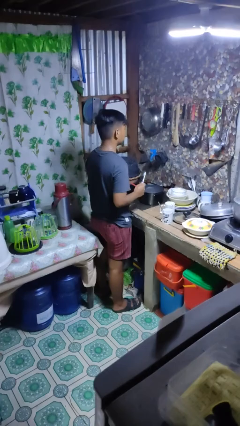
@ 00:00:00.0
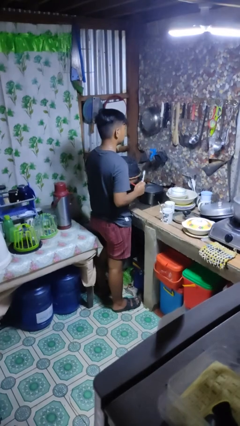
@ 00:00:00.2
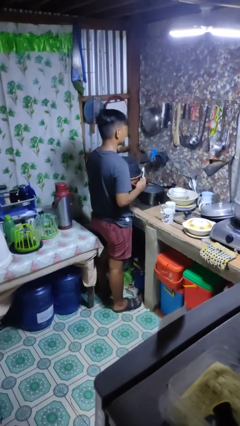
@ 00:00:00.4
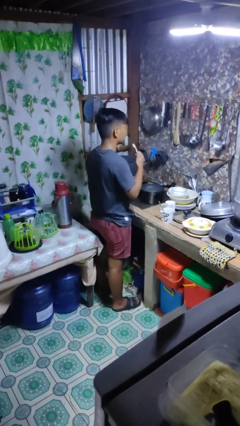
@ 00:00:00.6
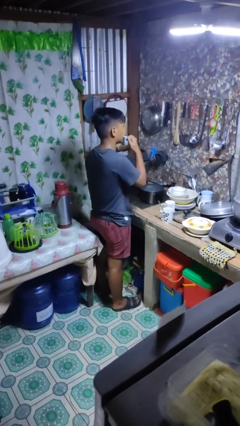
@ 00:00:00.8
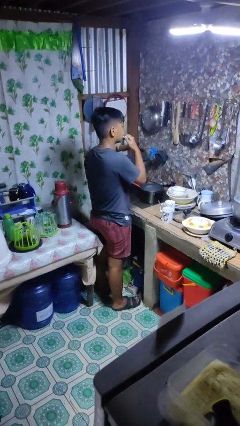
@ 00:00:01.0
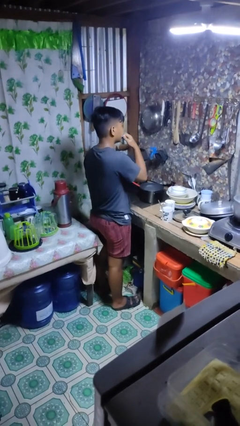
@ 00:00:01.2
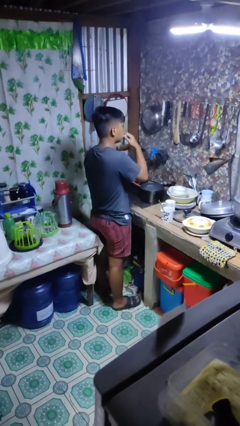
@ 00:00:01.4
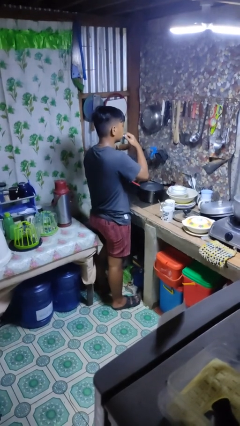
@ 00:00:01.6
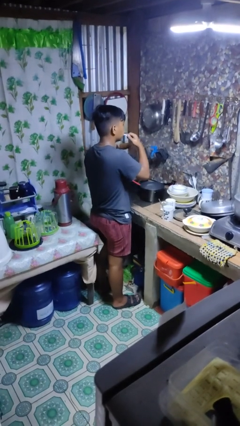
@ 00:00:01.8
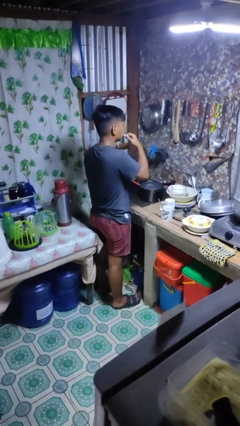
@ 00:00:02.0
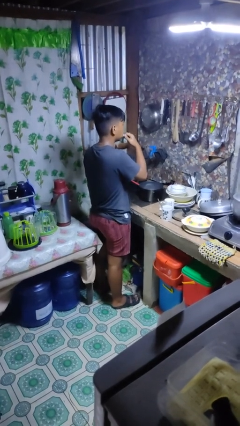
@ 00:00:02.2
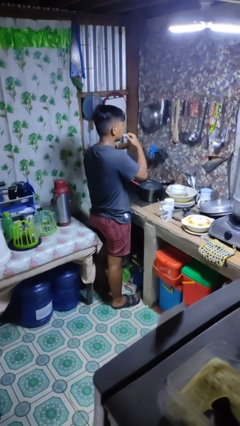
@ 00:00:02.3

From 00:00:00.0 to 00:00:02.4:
person brushes teeth

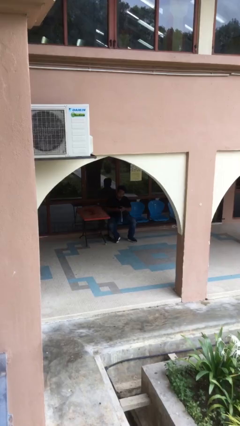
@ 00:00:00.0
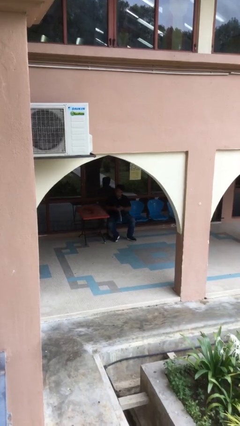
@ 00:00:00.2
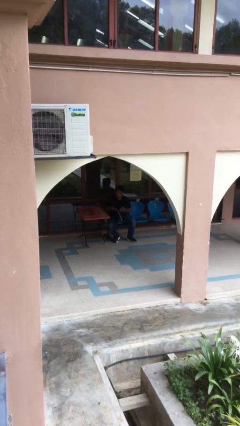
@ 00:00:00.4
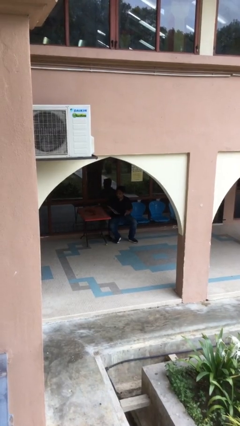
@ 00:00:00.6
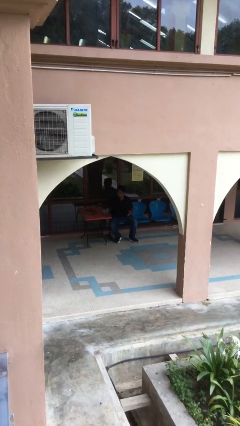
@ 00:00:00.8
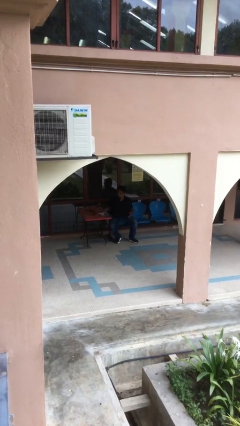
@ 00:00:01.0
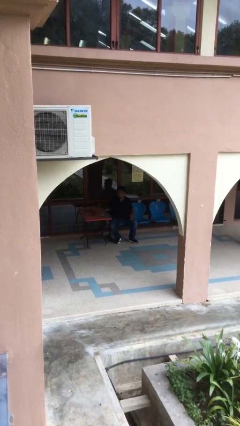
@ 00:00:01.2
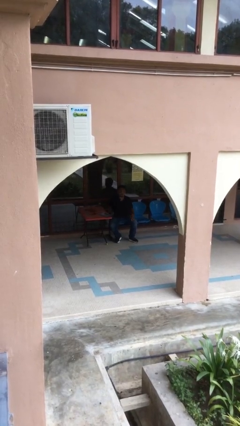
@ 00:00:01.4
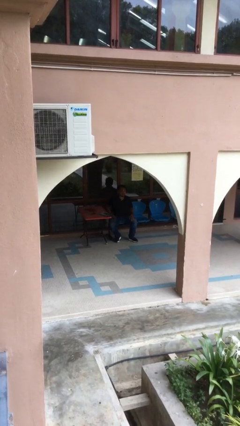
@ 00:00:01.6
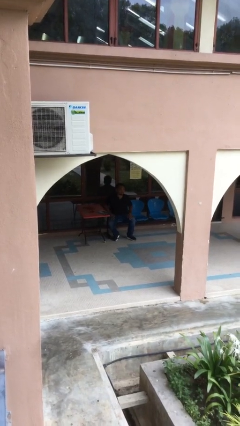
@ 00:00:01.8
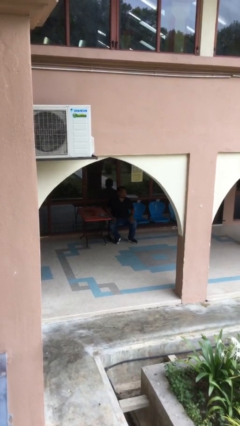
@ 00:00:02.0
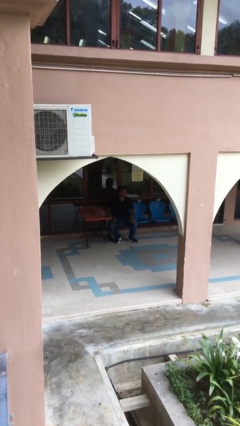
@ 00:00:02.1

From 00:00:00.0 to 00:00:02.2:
person puts down object on table

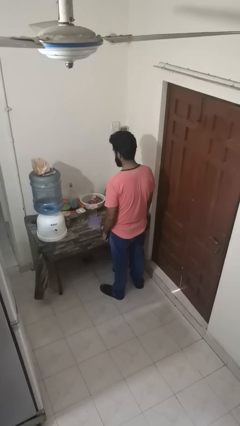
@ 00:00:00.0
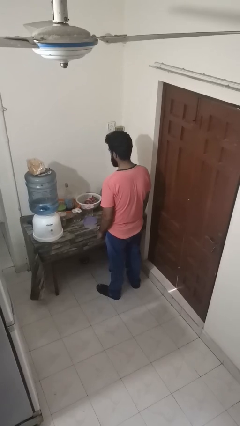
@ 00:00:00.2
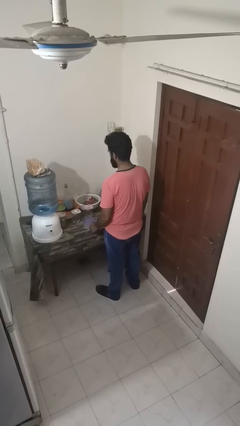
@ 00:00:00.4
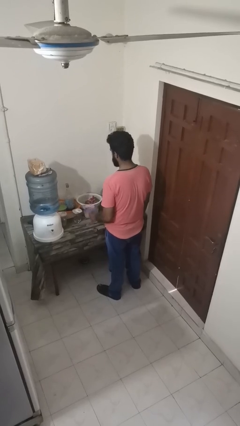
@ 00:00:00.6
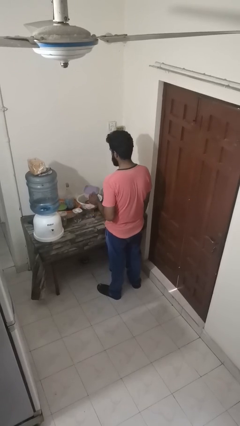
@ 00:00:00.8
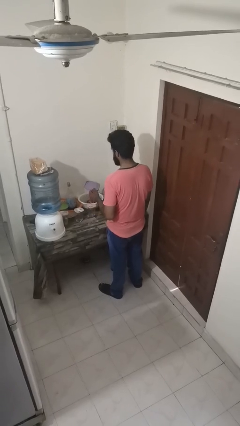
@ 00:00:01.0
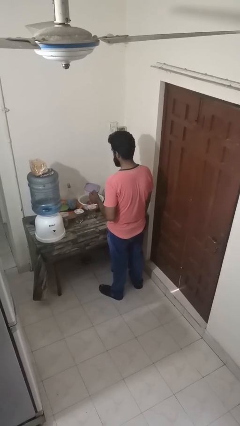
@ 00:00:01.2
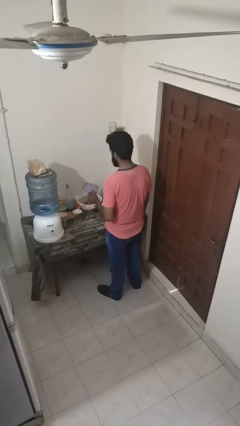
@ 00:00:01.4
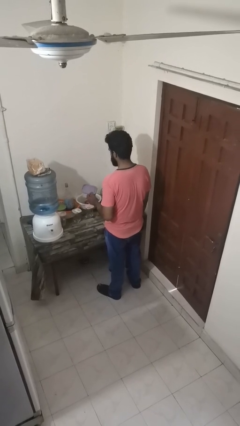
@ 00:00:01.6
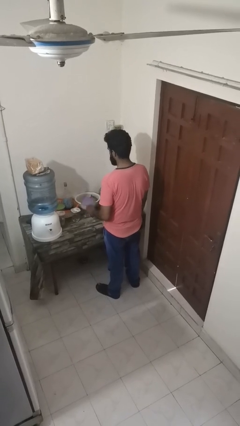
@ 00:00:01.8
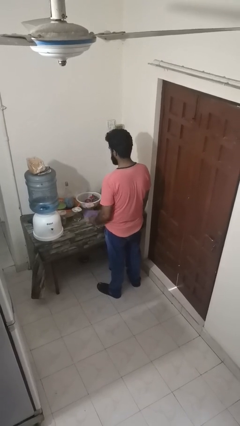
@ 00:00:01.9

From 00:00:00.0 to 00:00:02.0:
person picks up object from countertop

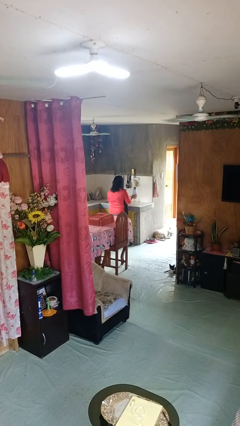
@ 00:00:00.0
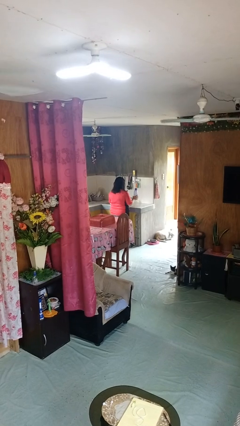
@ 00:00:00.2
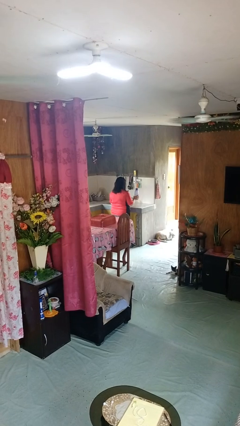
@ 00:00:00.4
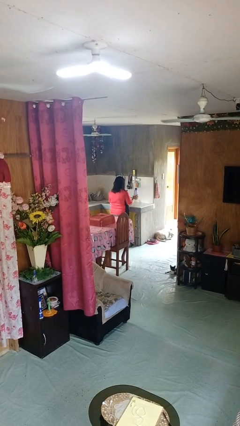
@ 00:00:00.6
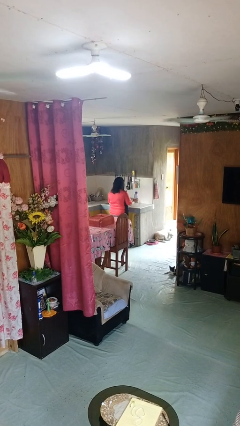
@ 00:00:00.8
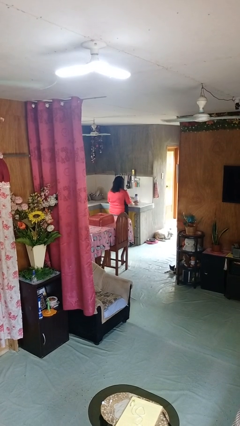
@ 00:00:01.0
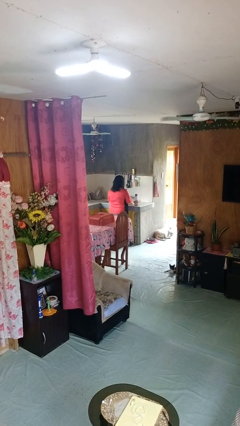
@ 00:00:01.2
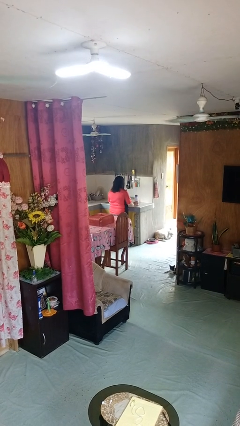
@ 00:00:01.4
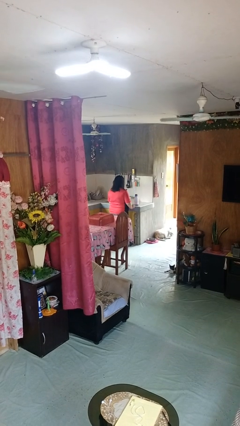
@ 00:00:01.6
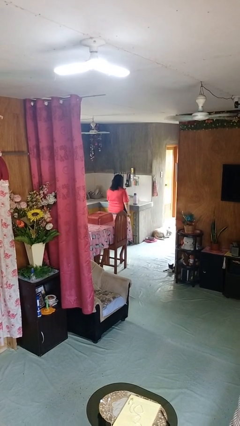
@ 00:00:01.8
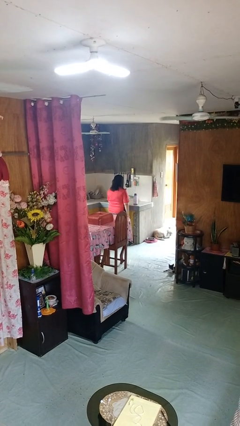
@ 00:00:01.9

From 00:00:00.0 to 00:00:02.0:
person puts down object on countertop

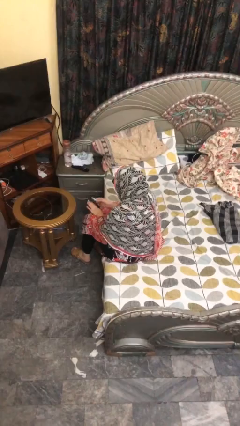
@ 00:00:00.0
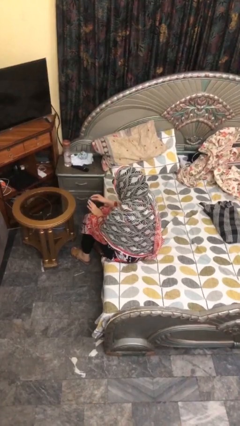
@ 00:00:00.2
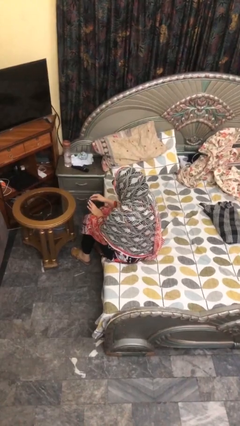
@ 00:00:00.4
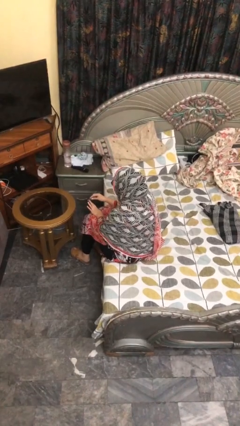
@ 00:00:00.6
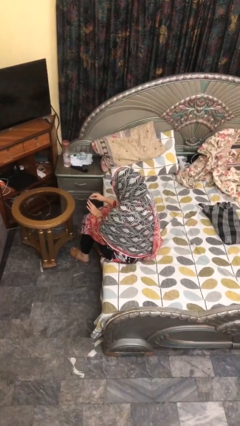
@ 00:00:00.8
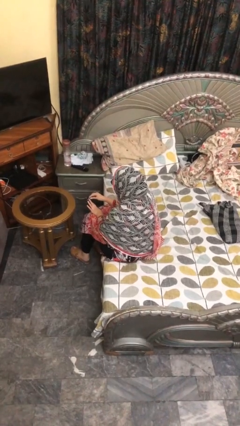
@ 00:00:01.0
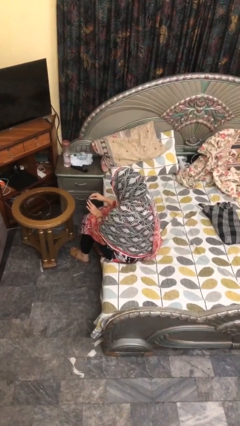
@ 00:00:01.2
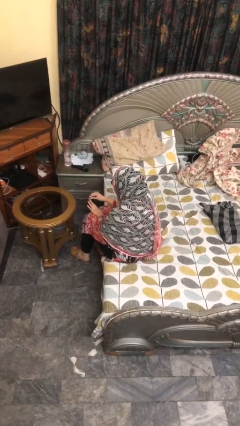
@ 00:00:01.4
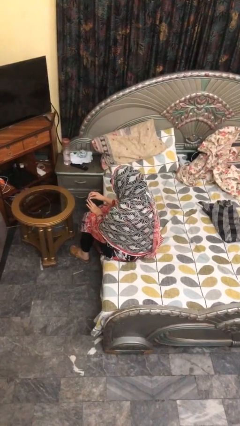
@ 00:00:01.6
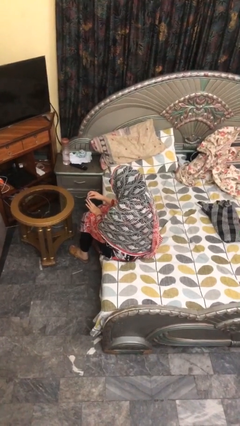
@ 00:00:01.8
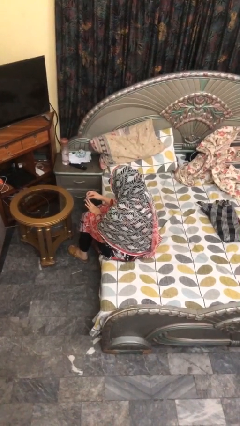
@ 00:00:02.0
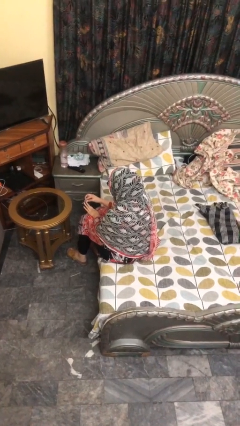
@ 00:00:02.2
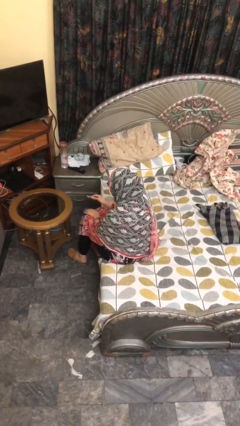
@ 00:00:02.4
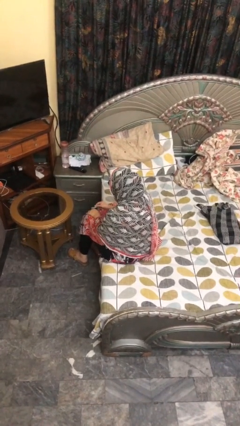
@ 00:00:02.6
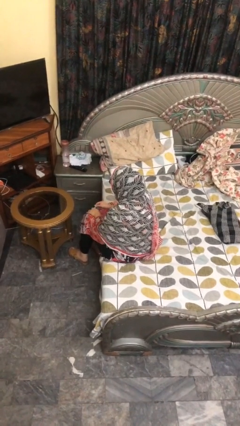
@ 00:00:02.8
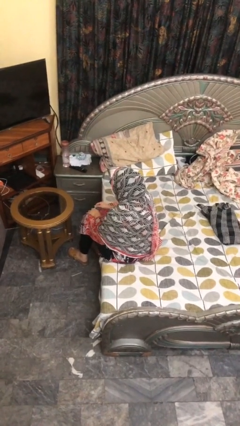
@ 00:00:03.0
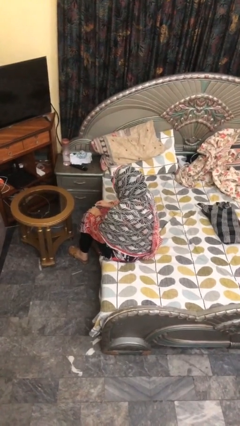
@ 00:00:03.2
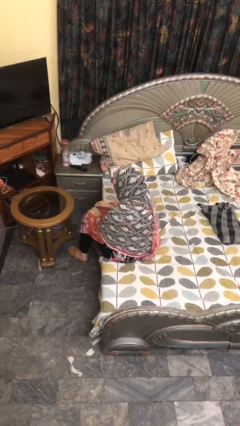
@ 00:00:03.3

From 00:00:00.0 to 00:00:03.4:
person files fingernails

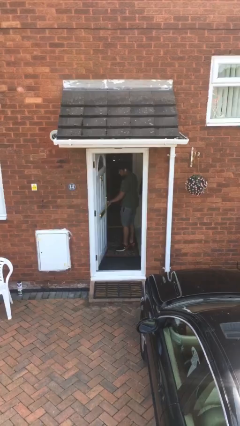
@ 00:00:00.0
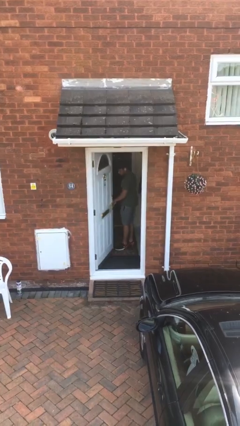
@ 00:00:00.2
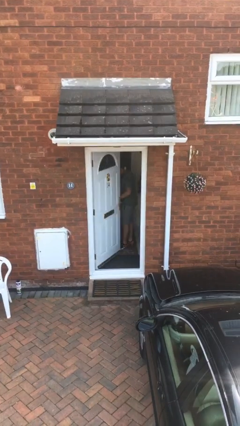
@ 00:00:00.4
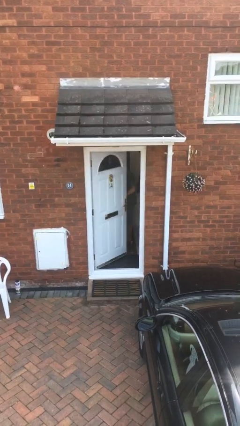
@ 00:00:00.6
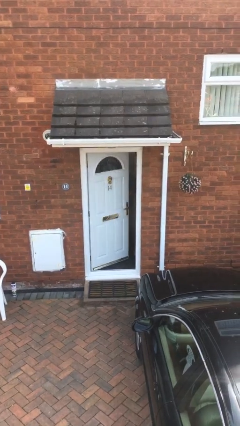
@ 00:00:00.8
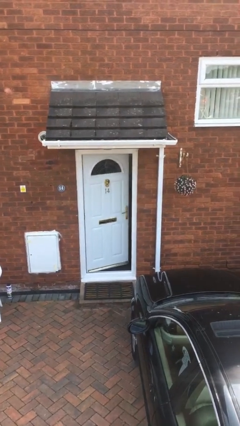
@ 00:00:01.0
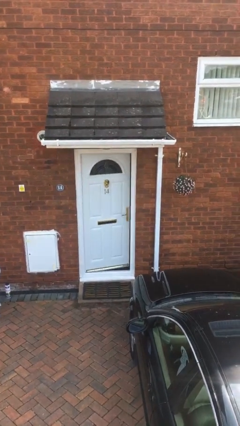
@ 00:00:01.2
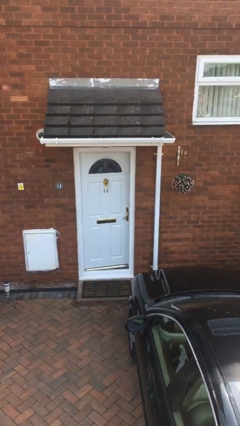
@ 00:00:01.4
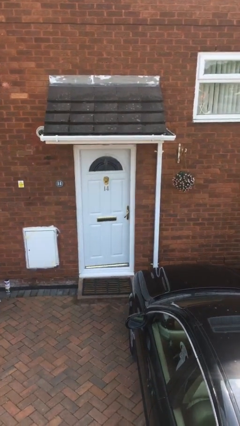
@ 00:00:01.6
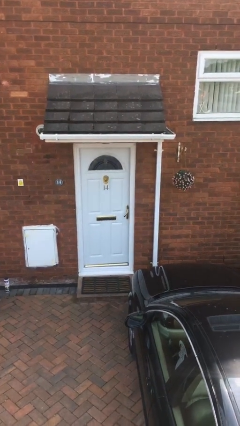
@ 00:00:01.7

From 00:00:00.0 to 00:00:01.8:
person closes facility door

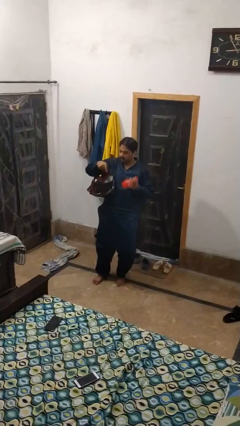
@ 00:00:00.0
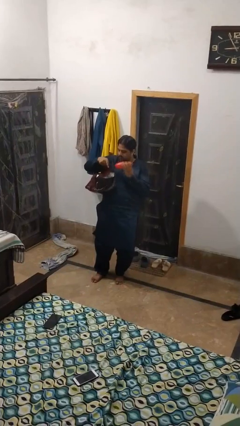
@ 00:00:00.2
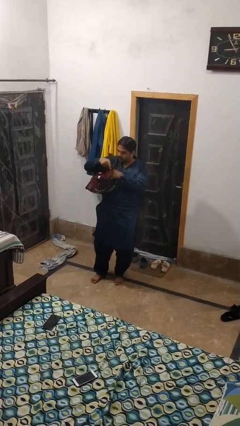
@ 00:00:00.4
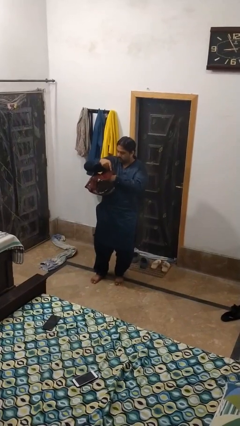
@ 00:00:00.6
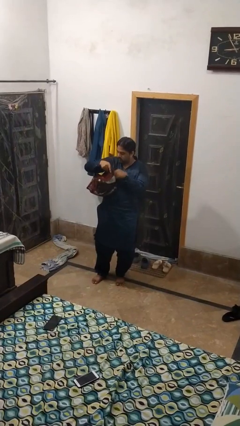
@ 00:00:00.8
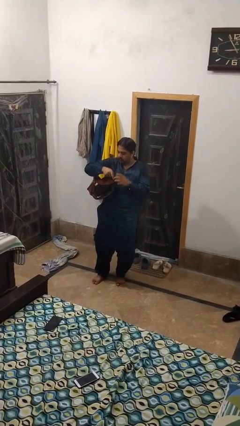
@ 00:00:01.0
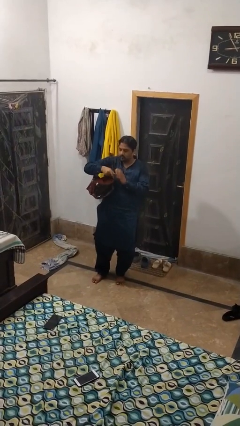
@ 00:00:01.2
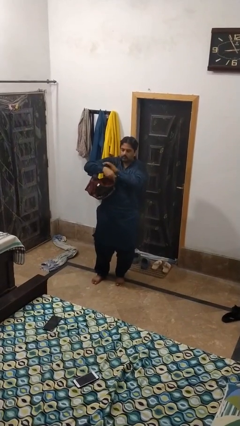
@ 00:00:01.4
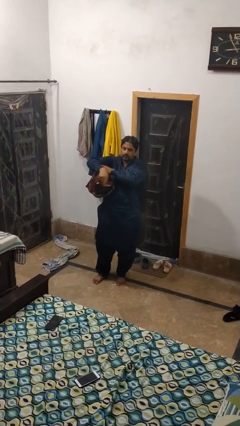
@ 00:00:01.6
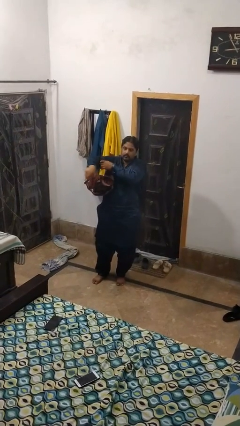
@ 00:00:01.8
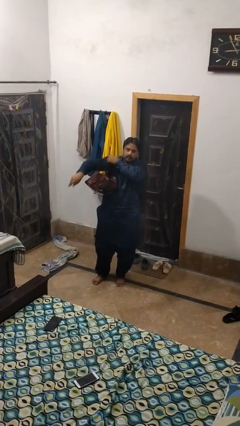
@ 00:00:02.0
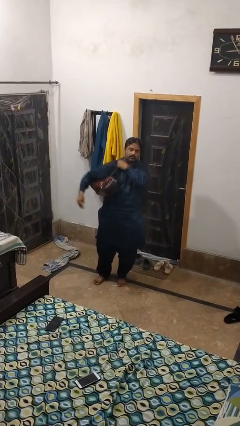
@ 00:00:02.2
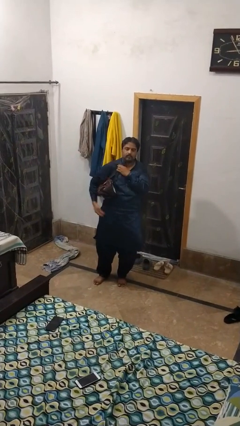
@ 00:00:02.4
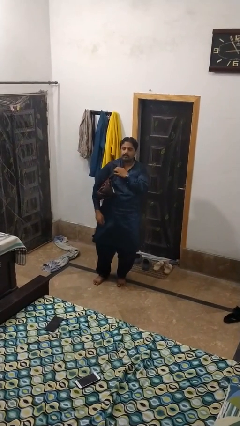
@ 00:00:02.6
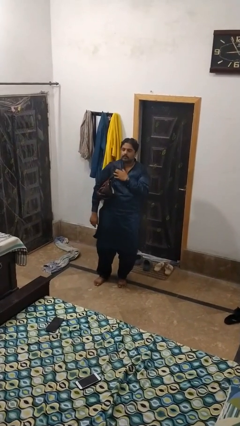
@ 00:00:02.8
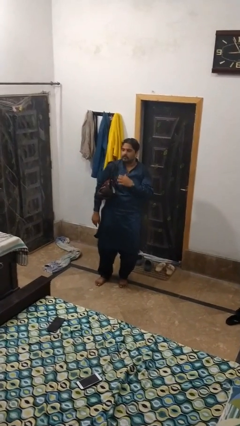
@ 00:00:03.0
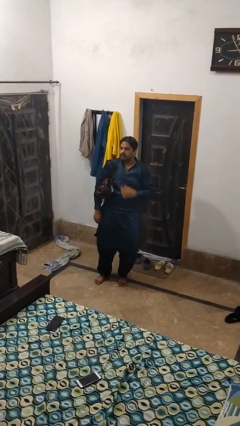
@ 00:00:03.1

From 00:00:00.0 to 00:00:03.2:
person puts object into purse
